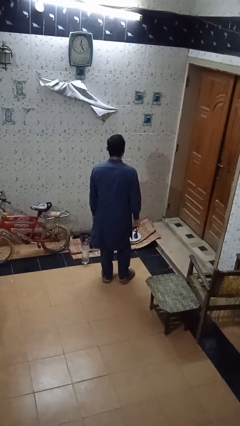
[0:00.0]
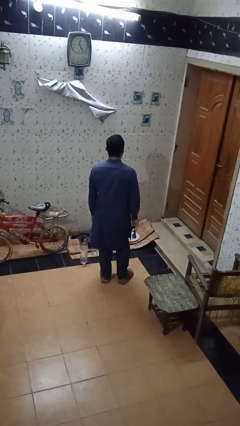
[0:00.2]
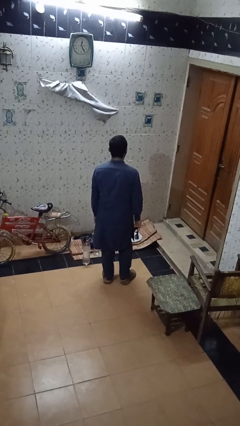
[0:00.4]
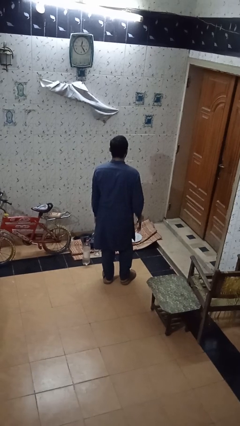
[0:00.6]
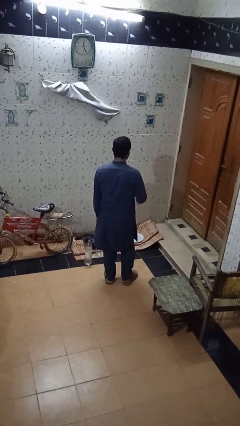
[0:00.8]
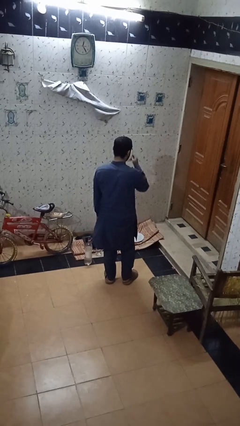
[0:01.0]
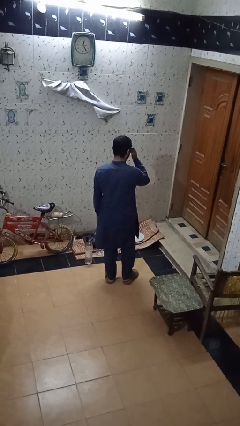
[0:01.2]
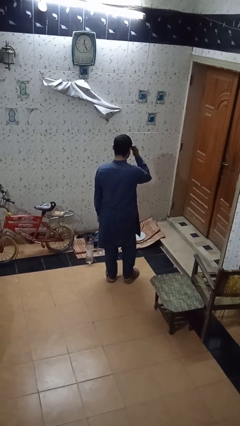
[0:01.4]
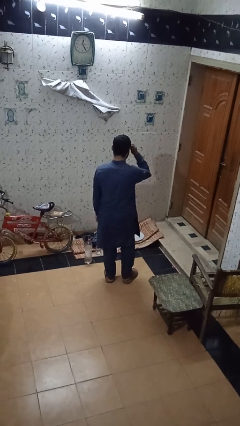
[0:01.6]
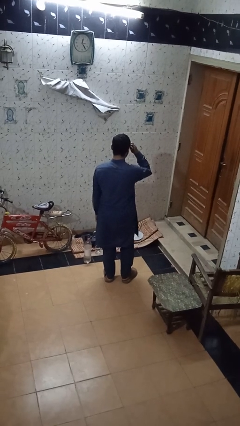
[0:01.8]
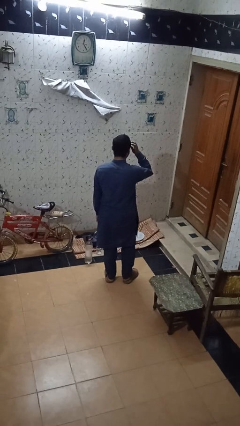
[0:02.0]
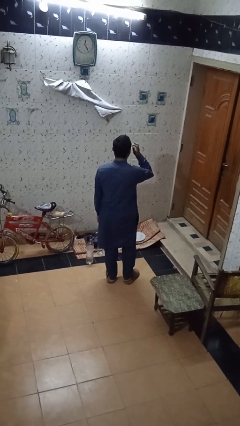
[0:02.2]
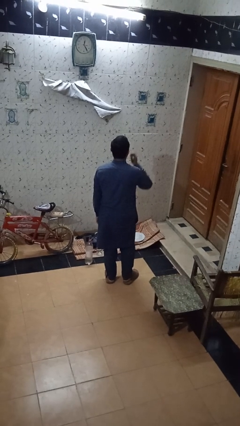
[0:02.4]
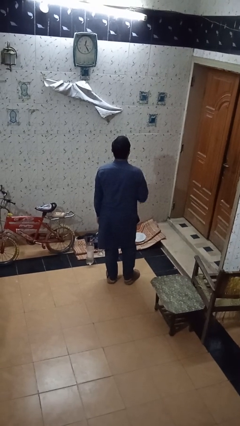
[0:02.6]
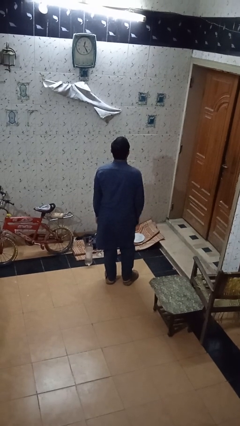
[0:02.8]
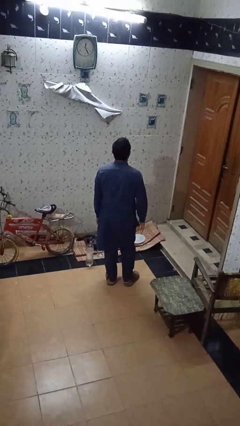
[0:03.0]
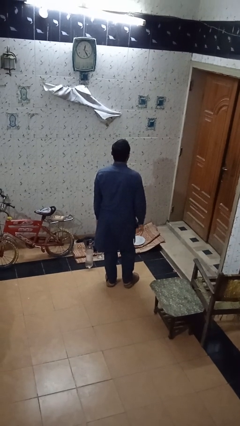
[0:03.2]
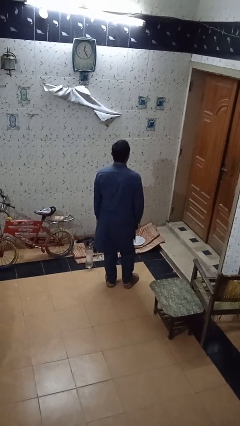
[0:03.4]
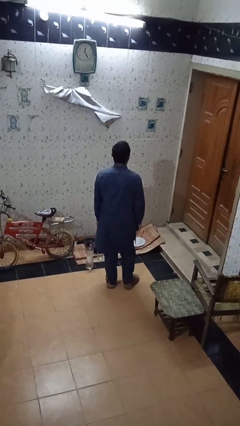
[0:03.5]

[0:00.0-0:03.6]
person puts on sunglasses

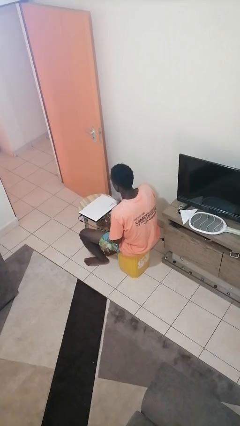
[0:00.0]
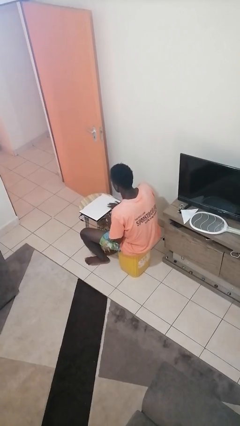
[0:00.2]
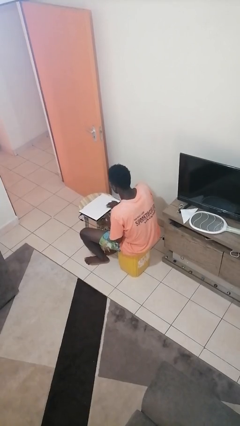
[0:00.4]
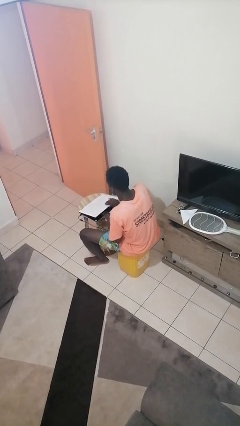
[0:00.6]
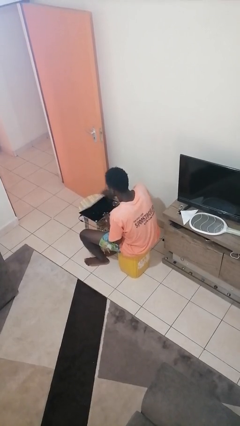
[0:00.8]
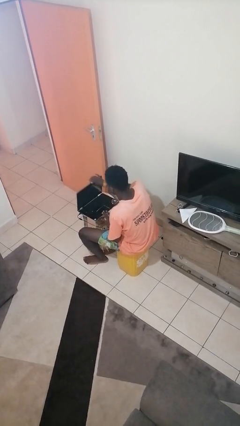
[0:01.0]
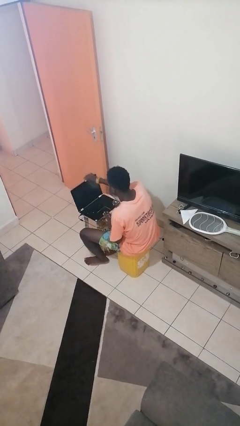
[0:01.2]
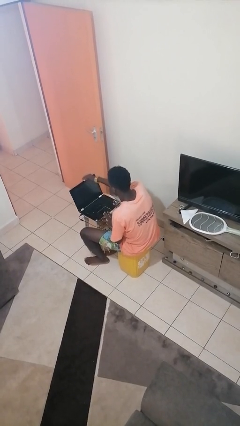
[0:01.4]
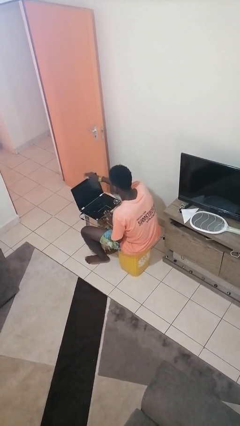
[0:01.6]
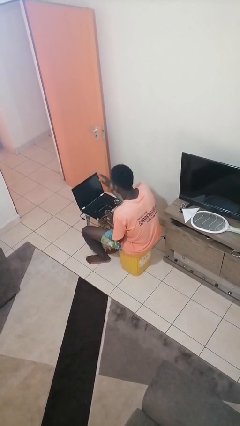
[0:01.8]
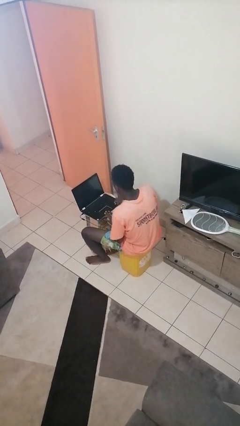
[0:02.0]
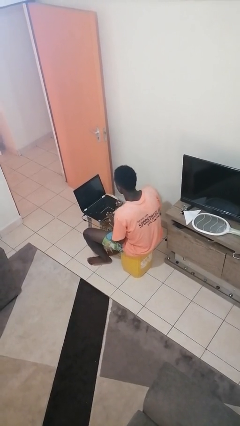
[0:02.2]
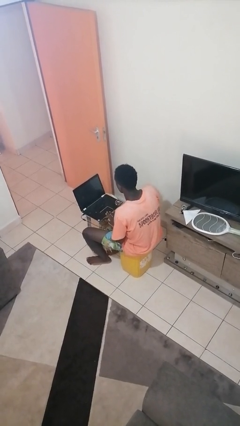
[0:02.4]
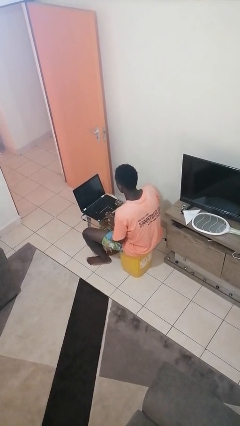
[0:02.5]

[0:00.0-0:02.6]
person opens laptop

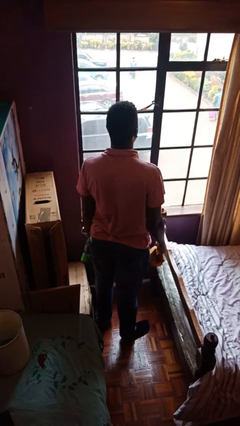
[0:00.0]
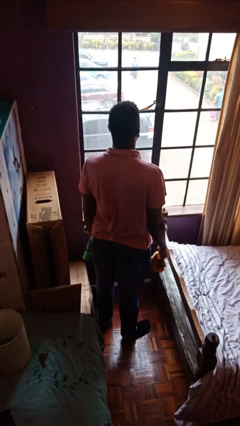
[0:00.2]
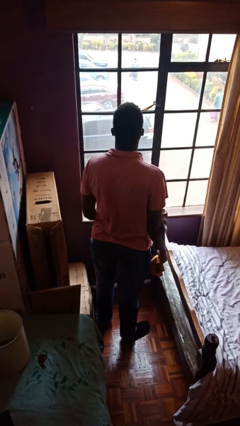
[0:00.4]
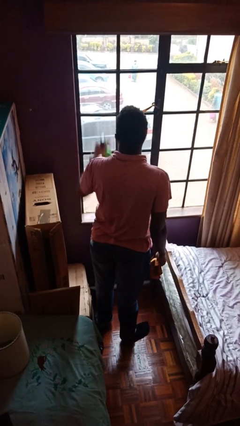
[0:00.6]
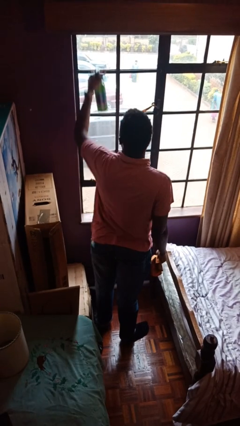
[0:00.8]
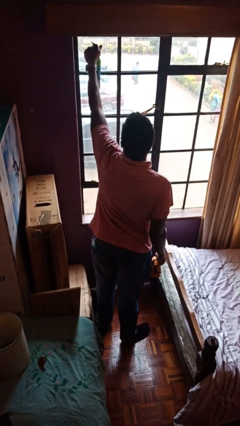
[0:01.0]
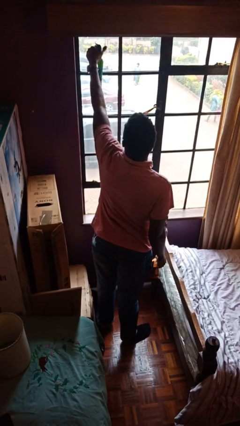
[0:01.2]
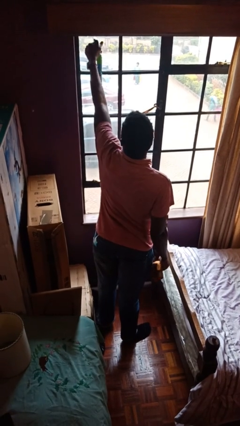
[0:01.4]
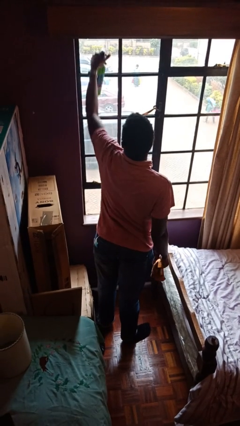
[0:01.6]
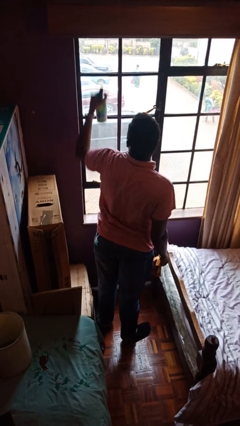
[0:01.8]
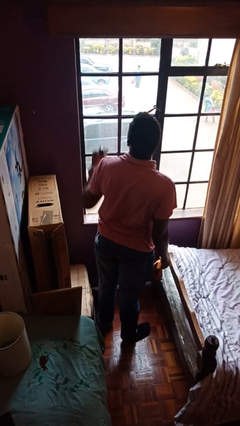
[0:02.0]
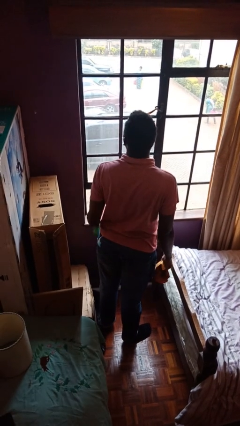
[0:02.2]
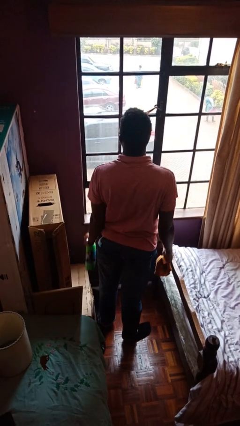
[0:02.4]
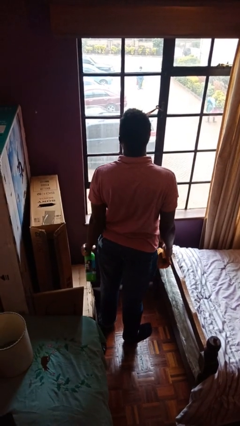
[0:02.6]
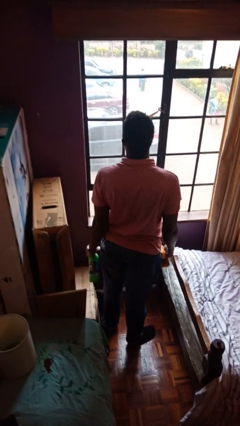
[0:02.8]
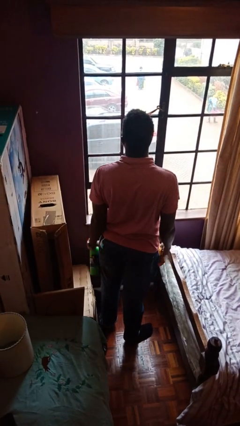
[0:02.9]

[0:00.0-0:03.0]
person sprays from bottle

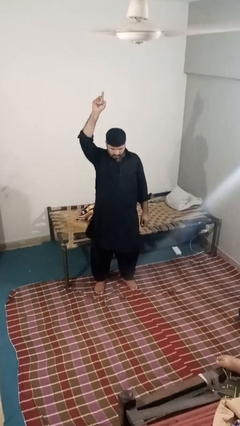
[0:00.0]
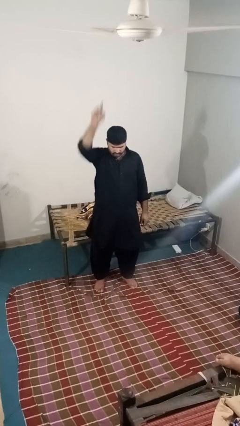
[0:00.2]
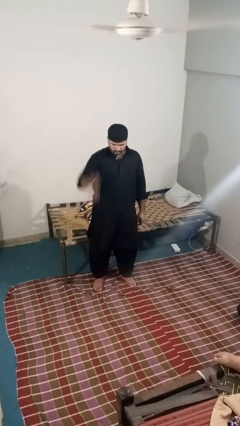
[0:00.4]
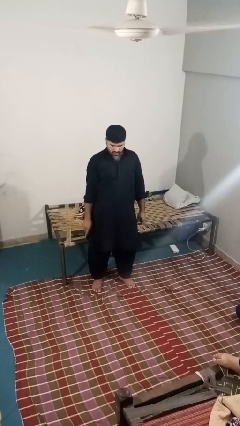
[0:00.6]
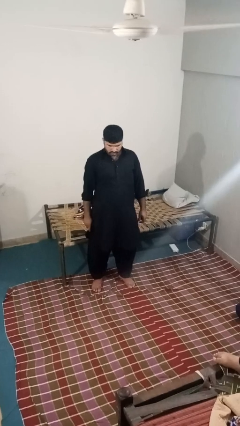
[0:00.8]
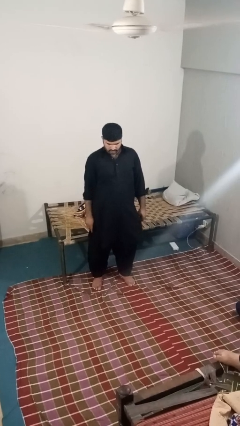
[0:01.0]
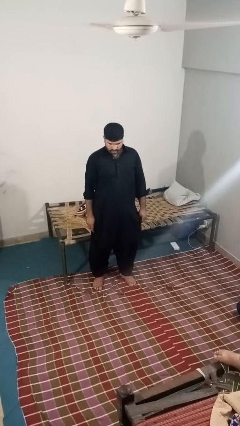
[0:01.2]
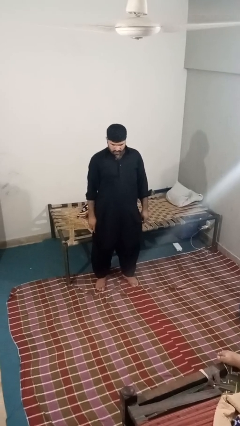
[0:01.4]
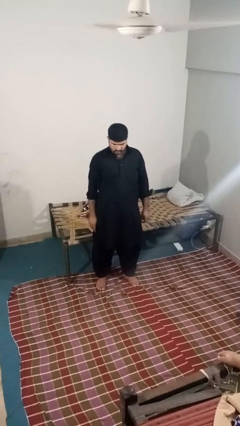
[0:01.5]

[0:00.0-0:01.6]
person gestures swipe down

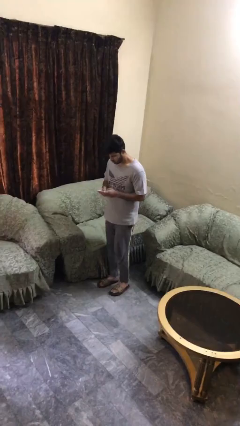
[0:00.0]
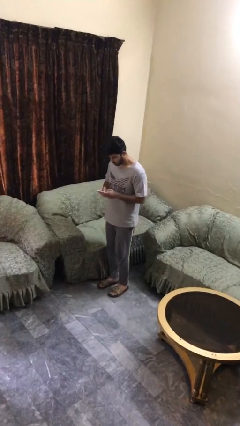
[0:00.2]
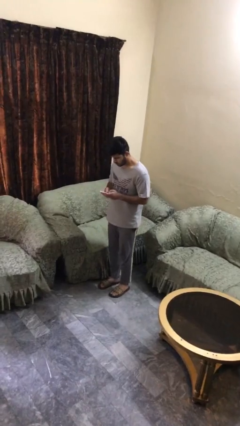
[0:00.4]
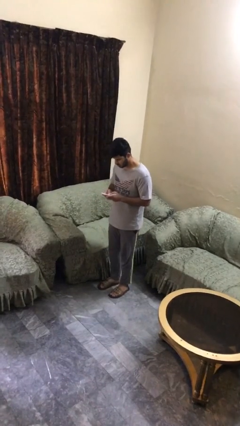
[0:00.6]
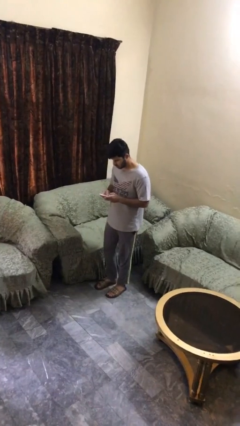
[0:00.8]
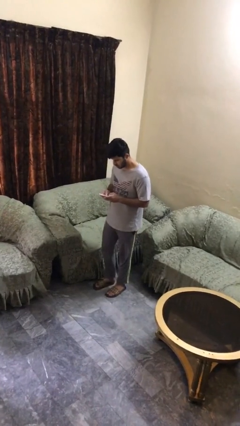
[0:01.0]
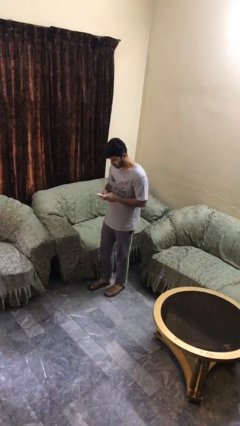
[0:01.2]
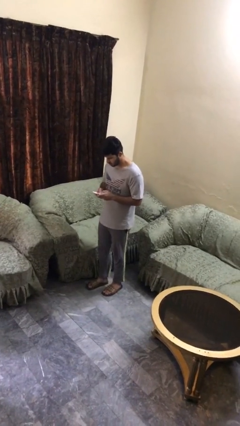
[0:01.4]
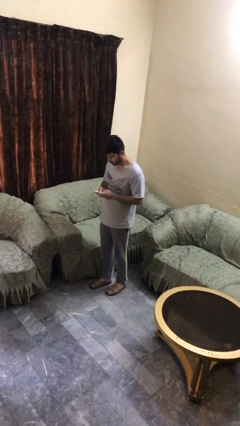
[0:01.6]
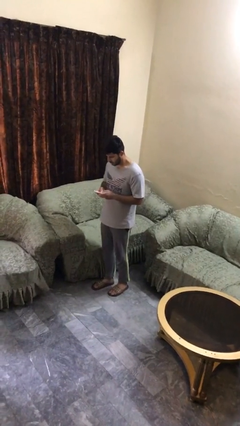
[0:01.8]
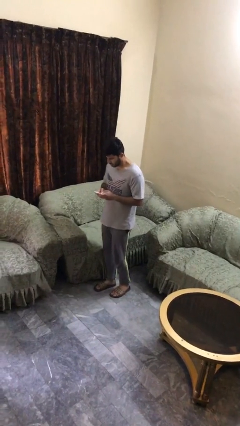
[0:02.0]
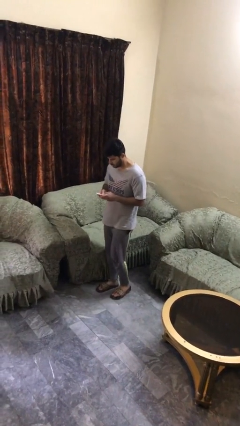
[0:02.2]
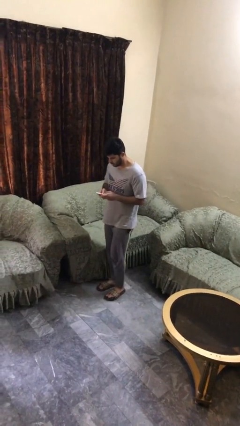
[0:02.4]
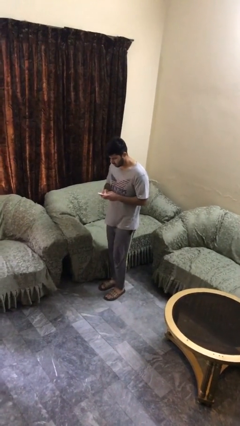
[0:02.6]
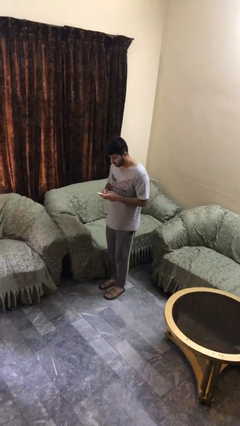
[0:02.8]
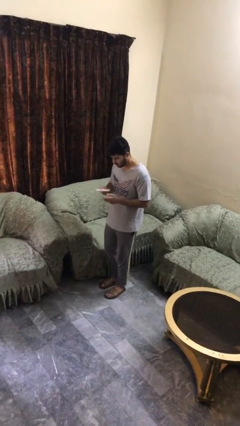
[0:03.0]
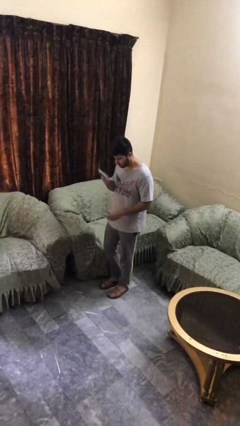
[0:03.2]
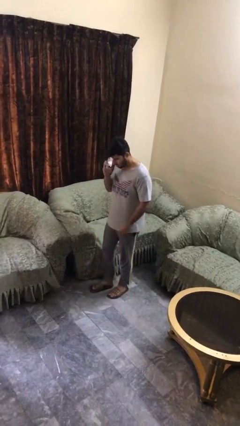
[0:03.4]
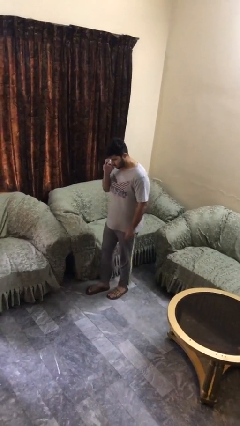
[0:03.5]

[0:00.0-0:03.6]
person texts on phone

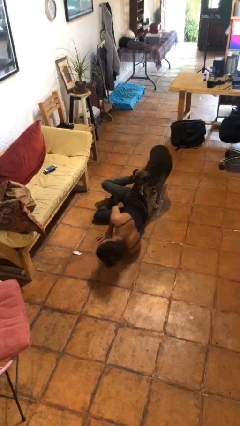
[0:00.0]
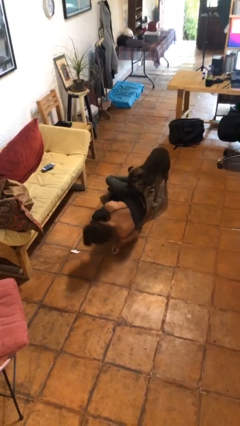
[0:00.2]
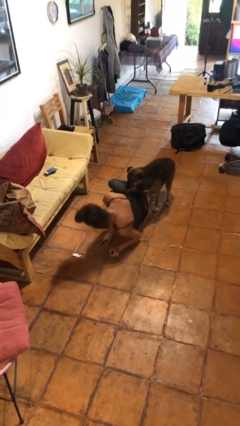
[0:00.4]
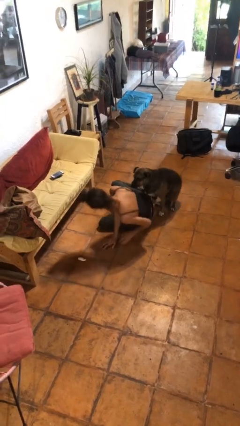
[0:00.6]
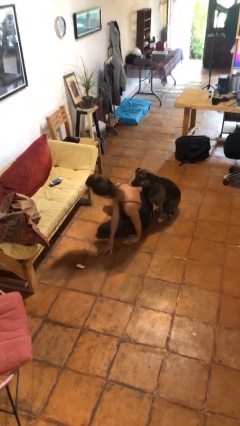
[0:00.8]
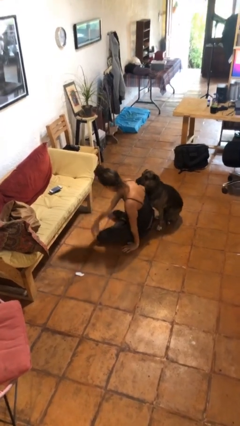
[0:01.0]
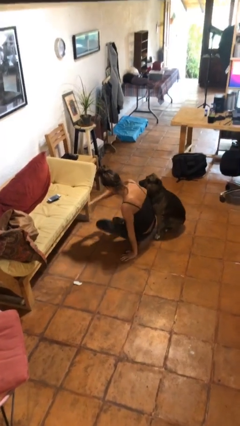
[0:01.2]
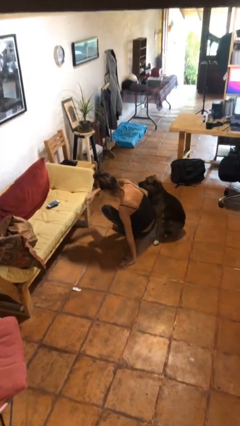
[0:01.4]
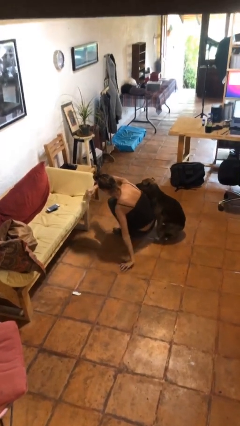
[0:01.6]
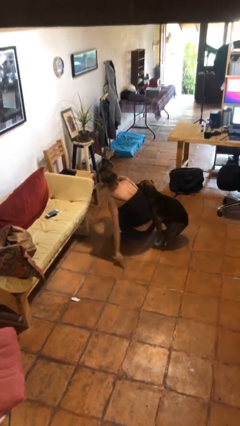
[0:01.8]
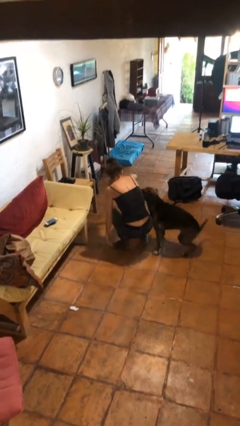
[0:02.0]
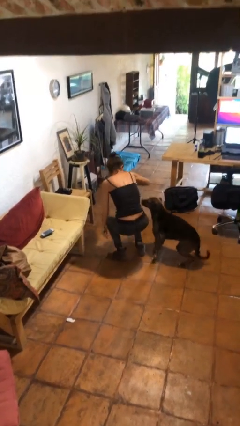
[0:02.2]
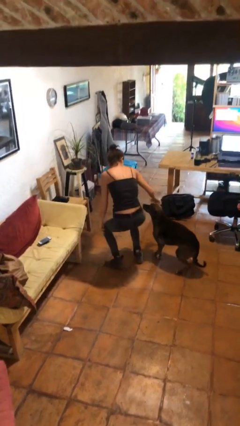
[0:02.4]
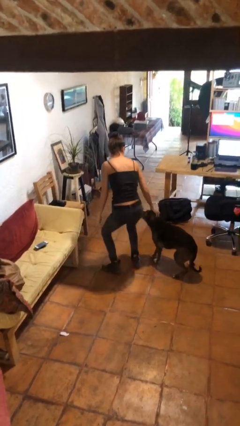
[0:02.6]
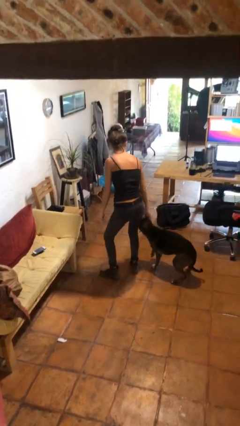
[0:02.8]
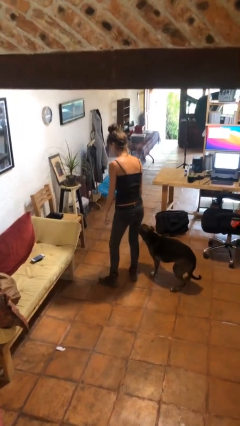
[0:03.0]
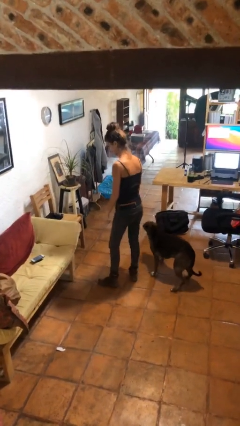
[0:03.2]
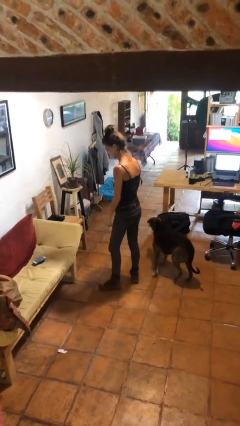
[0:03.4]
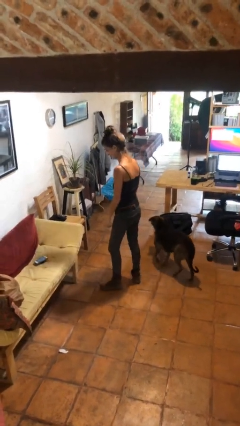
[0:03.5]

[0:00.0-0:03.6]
person stands up from floor
